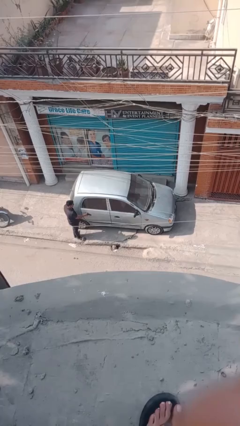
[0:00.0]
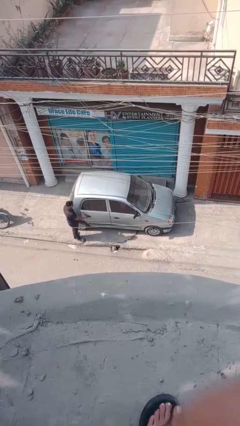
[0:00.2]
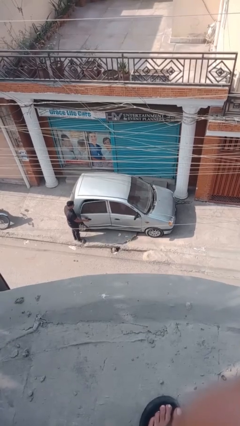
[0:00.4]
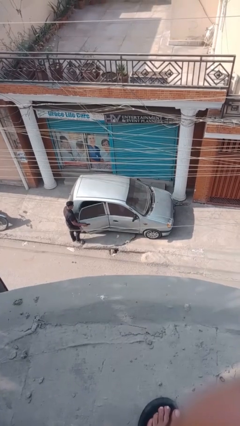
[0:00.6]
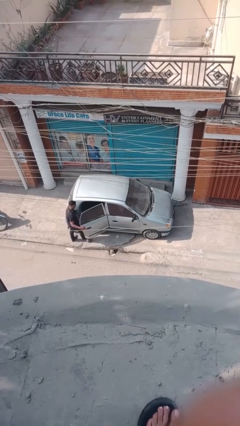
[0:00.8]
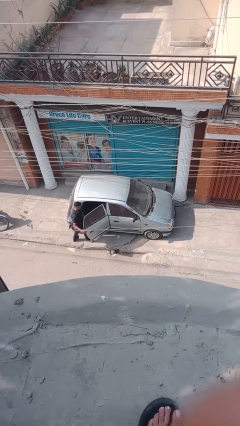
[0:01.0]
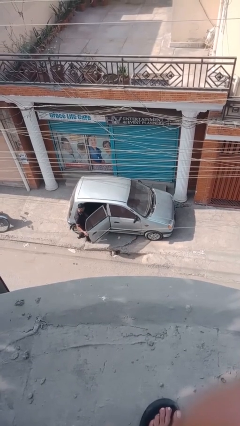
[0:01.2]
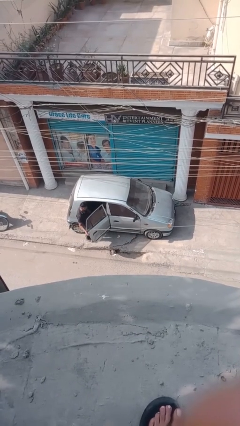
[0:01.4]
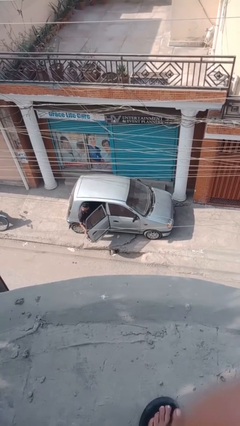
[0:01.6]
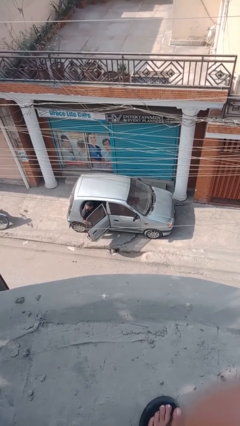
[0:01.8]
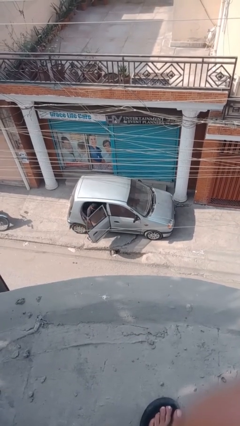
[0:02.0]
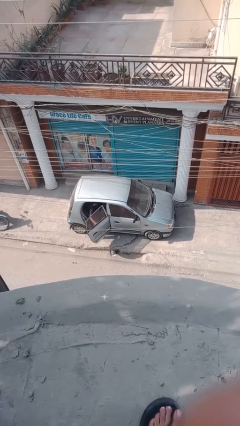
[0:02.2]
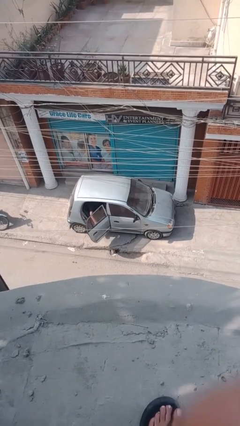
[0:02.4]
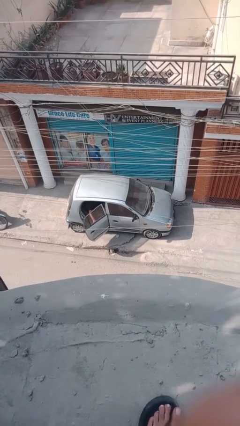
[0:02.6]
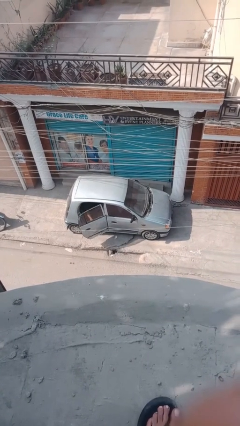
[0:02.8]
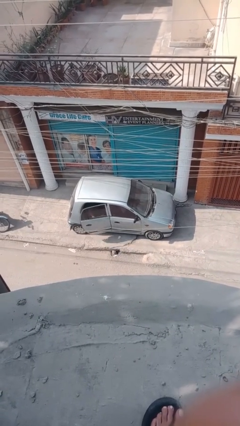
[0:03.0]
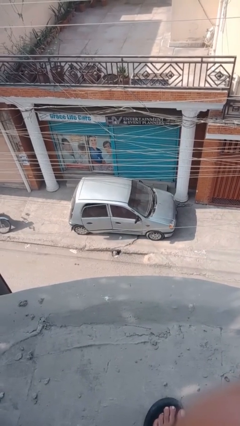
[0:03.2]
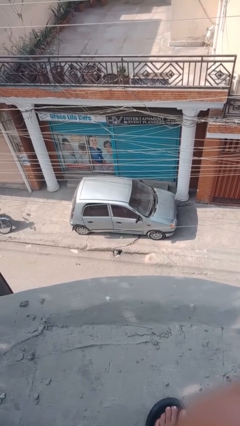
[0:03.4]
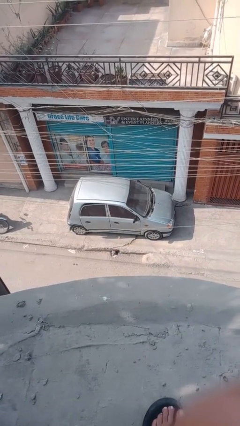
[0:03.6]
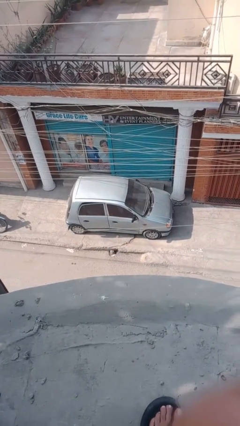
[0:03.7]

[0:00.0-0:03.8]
car picks up person

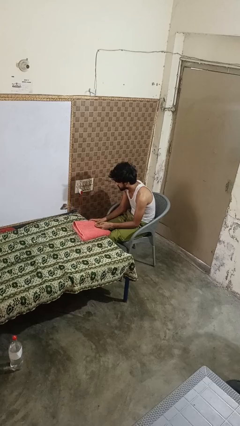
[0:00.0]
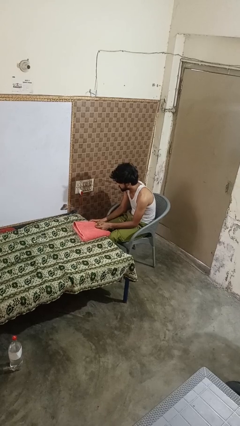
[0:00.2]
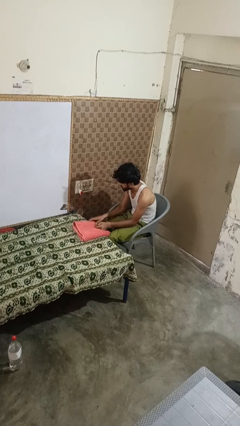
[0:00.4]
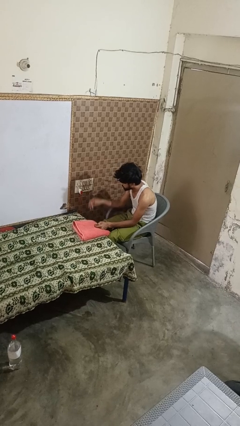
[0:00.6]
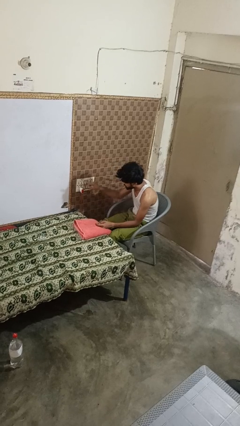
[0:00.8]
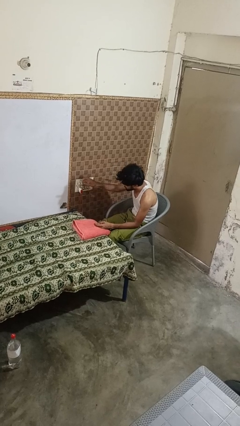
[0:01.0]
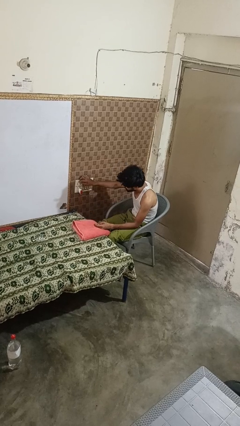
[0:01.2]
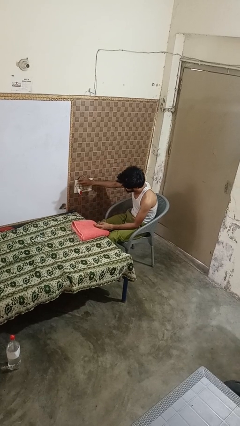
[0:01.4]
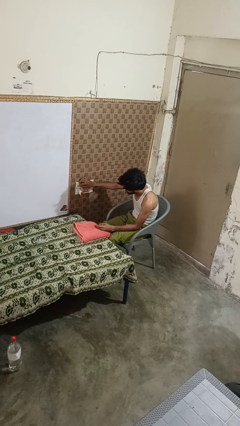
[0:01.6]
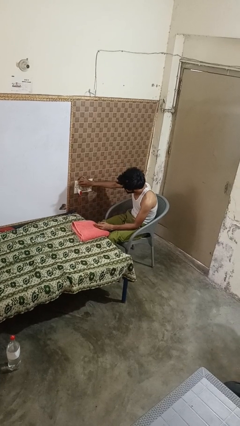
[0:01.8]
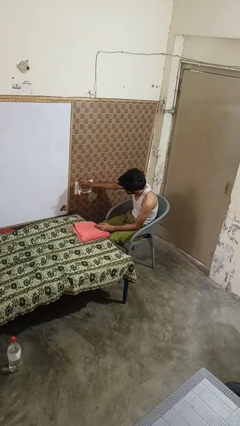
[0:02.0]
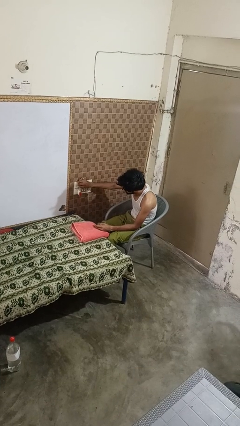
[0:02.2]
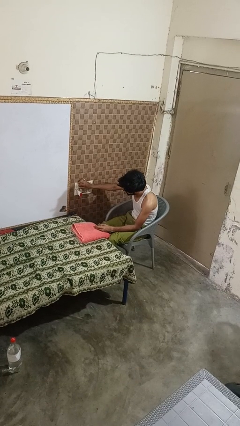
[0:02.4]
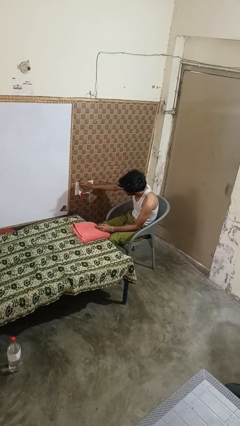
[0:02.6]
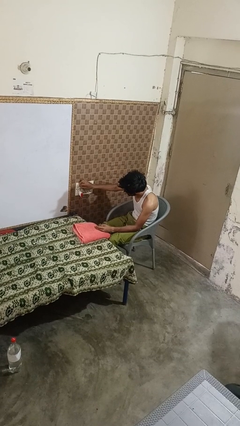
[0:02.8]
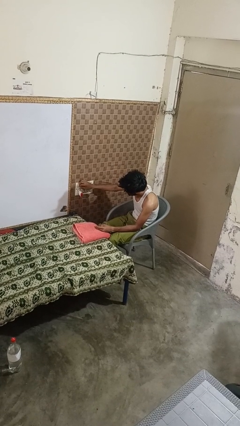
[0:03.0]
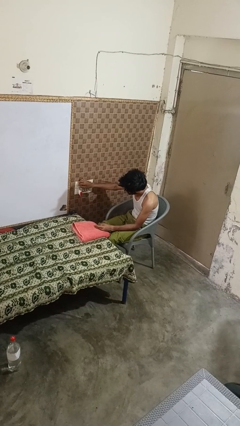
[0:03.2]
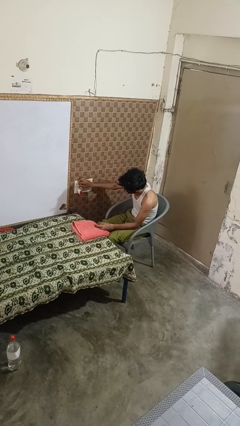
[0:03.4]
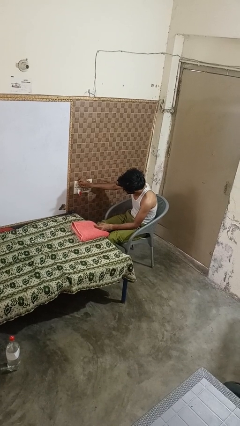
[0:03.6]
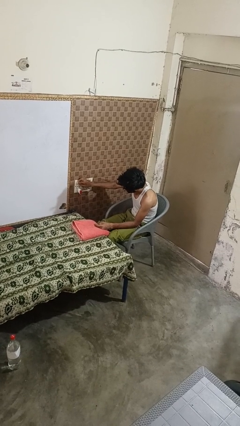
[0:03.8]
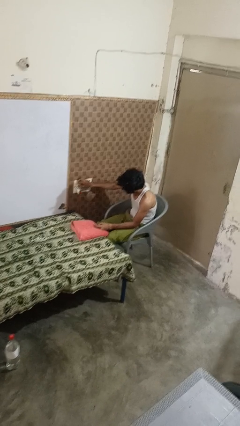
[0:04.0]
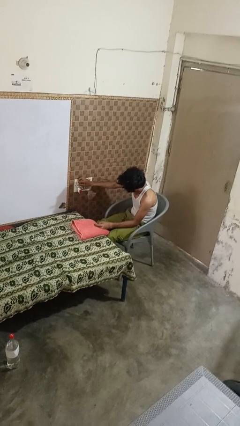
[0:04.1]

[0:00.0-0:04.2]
person adjusts thermostat

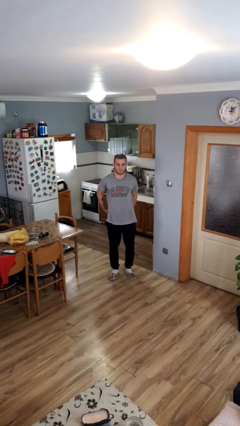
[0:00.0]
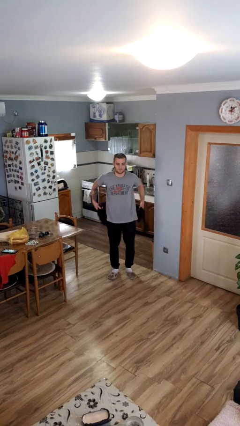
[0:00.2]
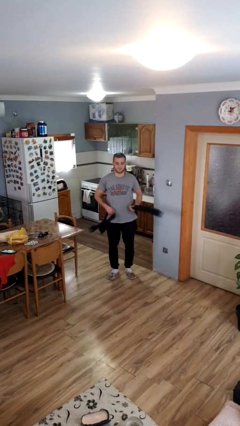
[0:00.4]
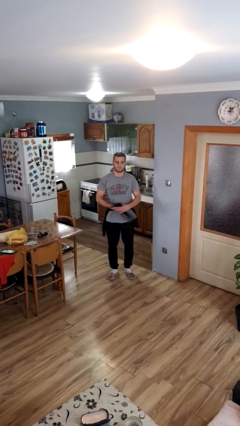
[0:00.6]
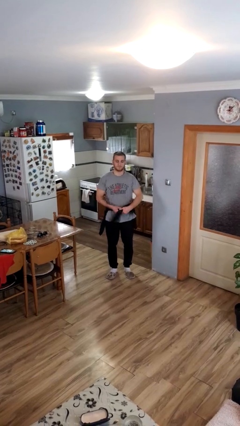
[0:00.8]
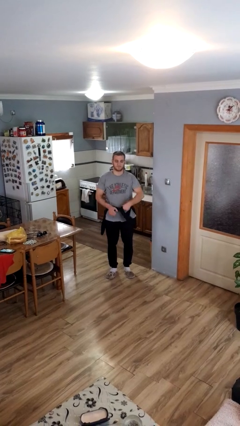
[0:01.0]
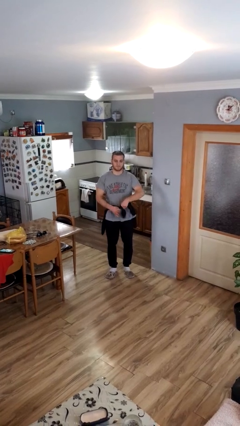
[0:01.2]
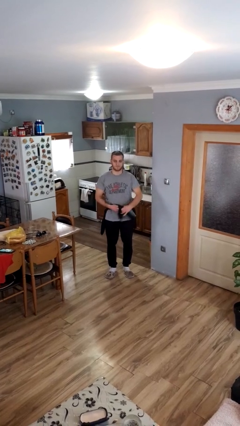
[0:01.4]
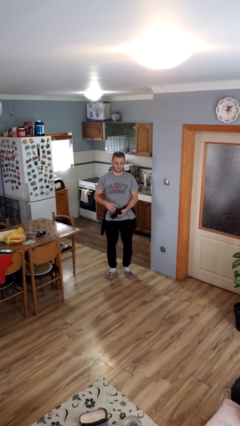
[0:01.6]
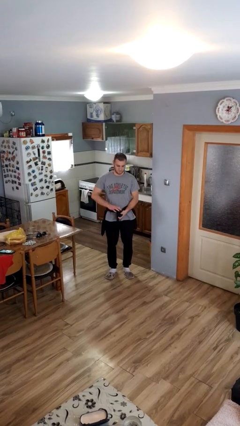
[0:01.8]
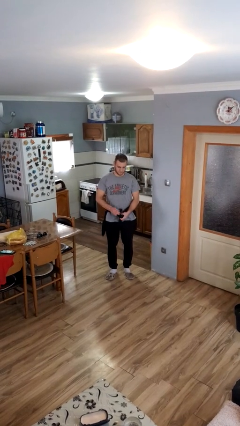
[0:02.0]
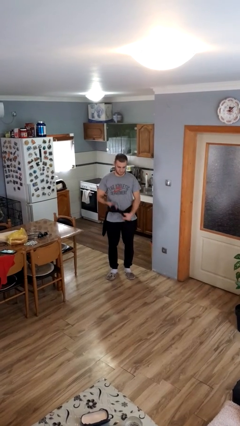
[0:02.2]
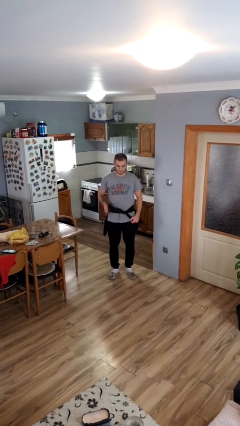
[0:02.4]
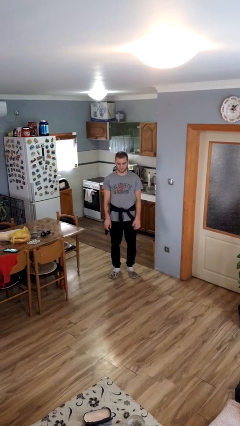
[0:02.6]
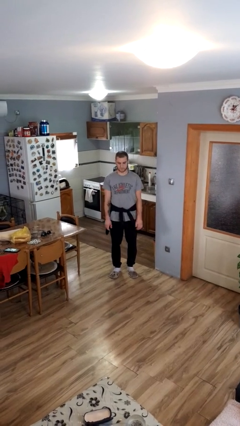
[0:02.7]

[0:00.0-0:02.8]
person ties jacket around waist

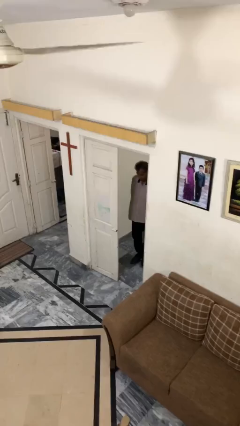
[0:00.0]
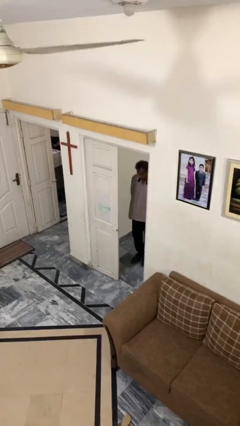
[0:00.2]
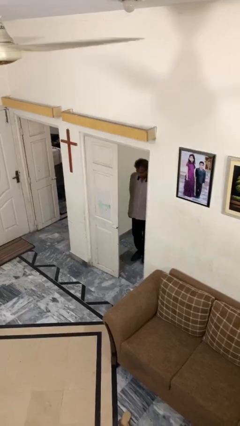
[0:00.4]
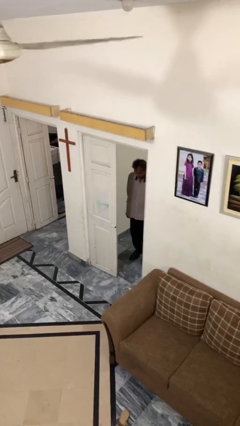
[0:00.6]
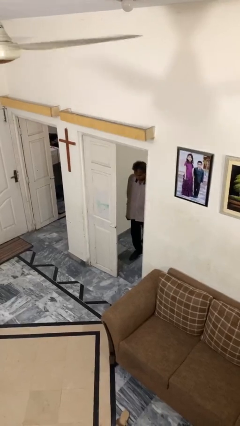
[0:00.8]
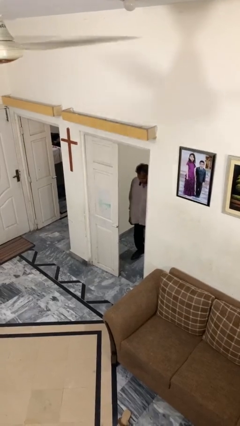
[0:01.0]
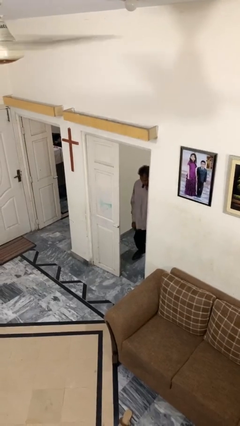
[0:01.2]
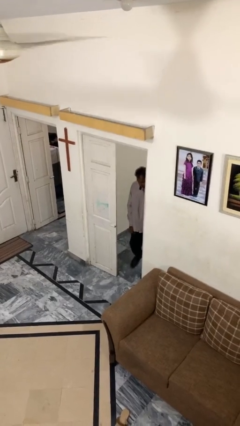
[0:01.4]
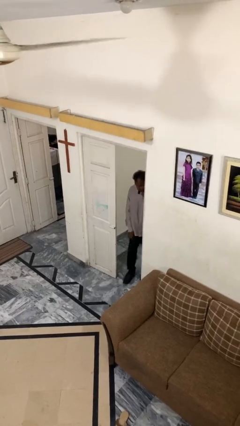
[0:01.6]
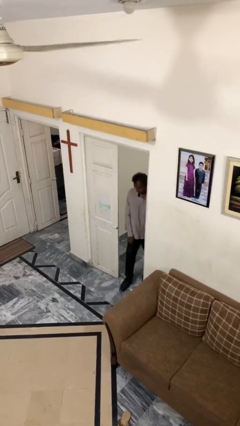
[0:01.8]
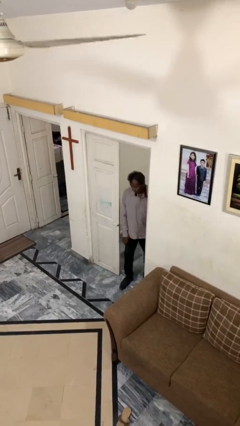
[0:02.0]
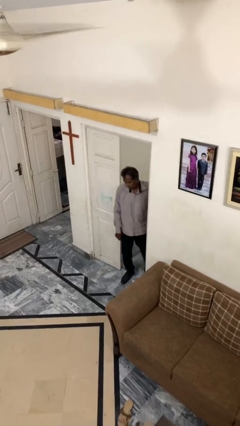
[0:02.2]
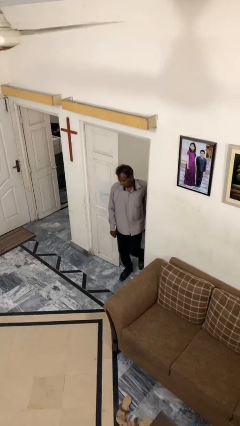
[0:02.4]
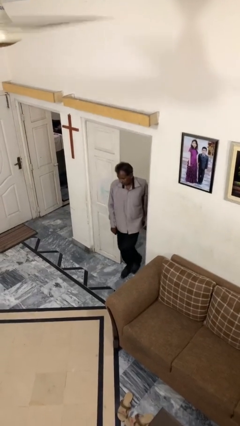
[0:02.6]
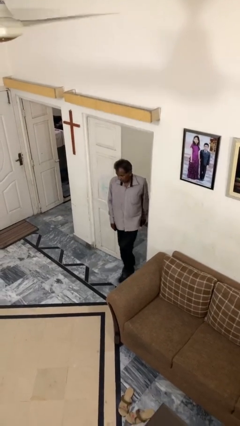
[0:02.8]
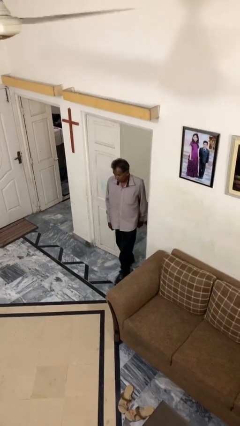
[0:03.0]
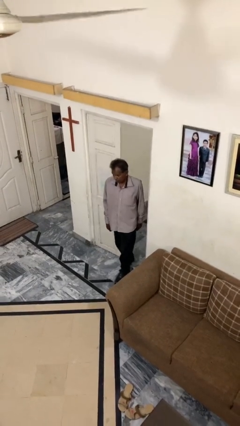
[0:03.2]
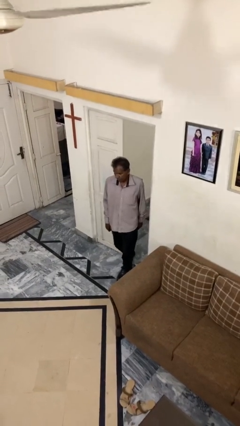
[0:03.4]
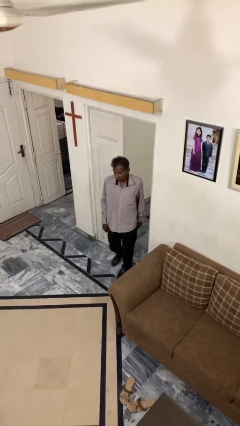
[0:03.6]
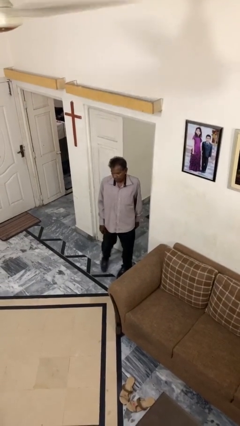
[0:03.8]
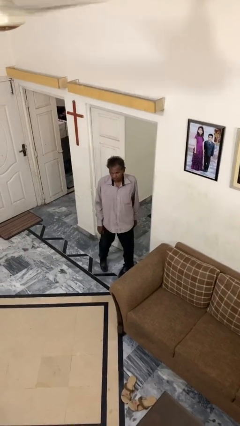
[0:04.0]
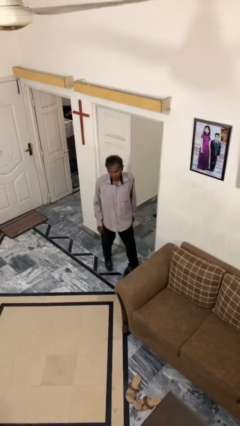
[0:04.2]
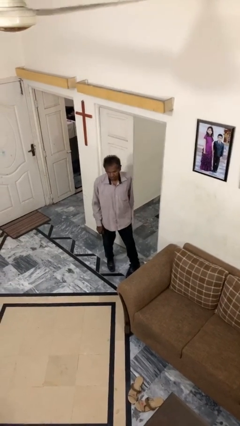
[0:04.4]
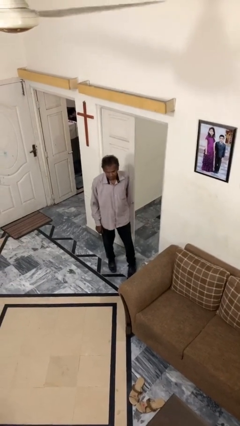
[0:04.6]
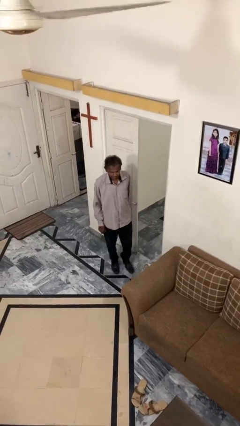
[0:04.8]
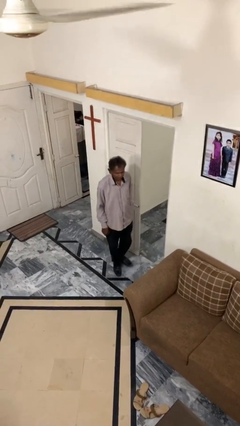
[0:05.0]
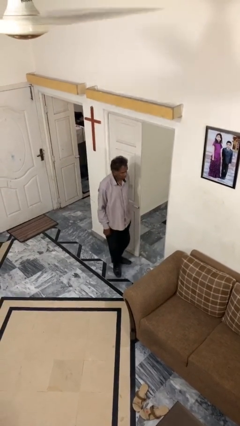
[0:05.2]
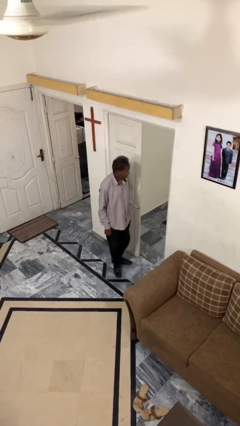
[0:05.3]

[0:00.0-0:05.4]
person enters scene through structure

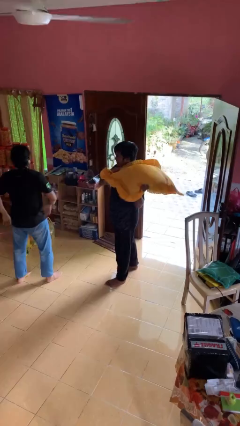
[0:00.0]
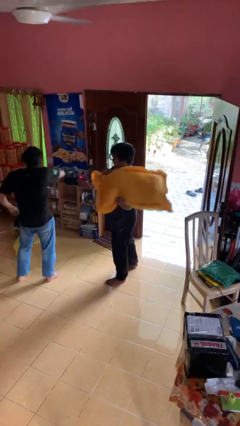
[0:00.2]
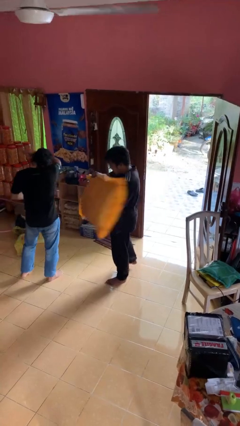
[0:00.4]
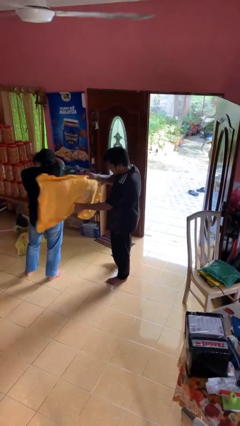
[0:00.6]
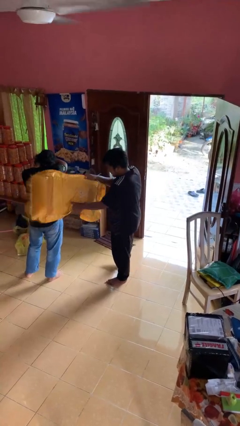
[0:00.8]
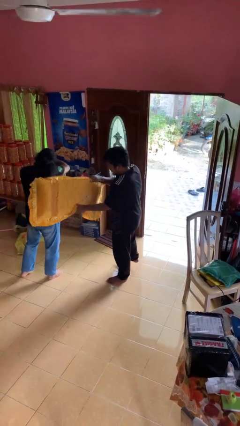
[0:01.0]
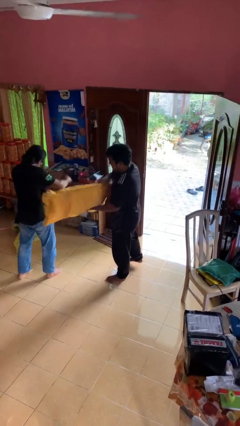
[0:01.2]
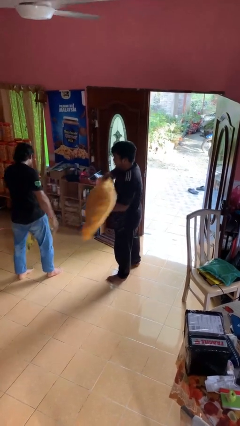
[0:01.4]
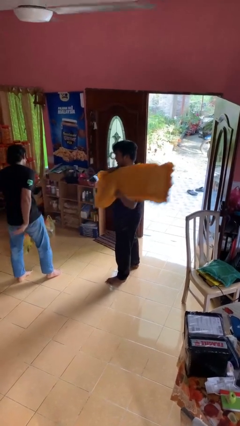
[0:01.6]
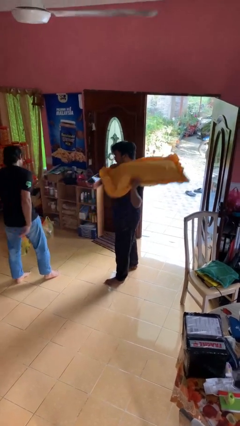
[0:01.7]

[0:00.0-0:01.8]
person hits person with pillow
